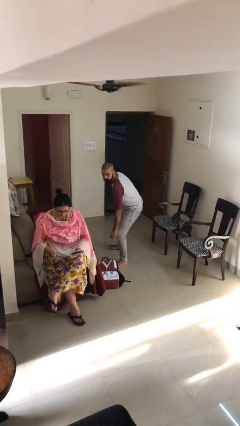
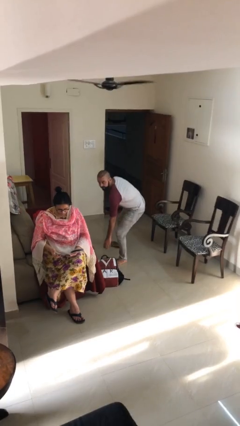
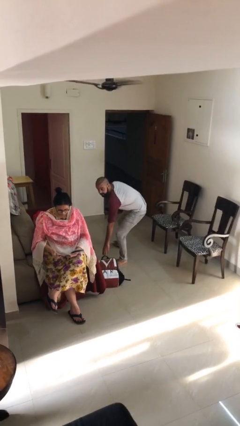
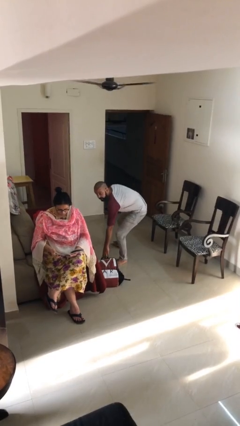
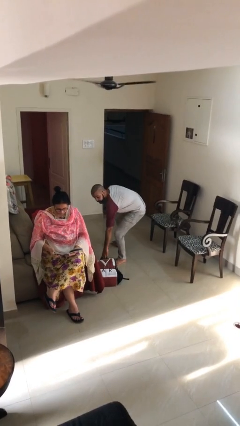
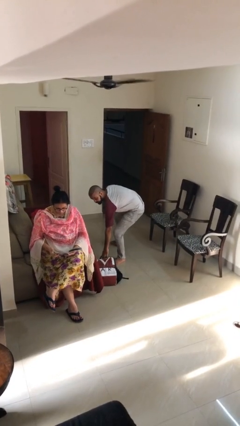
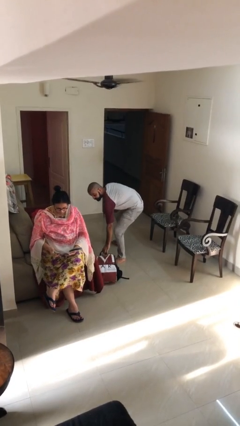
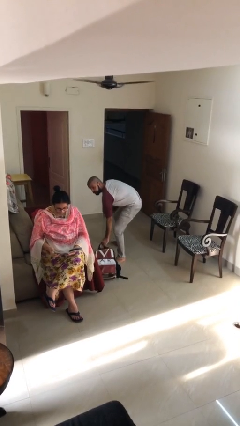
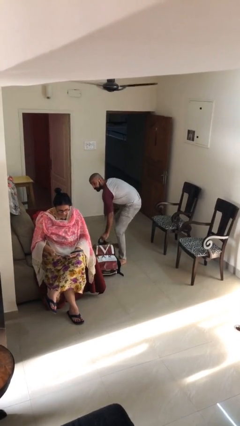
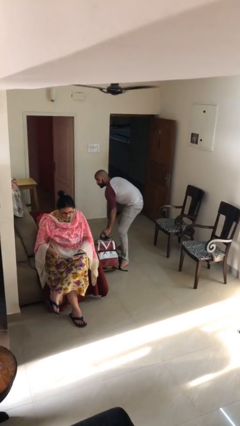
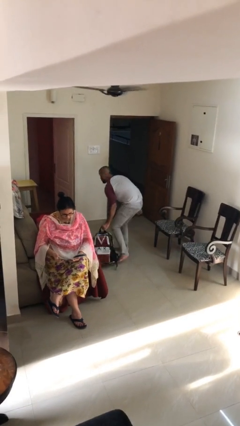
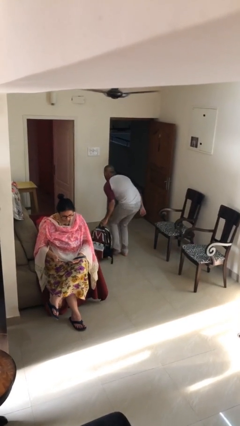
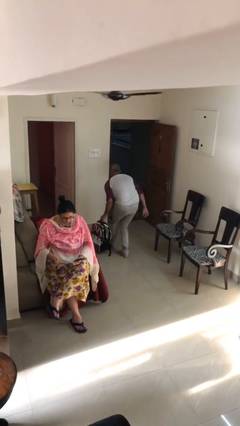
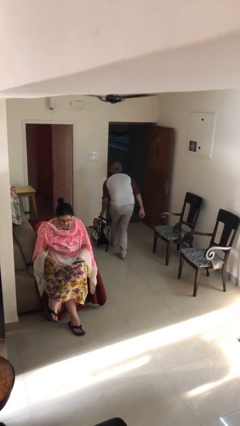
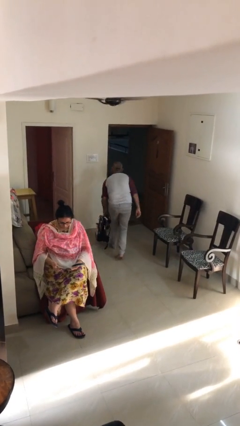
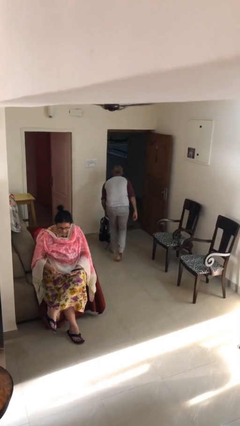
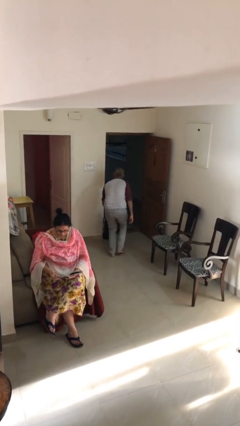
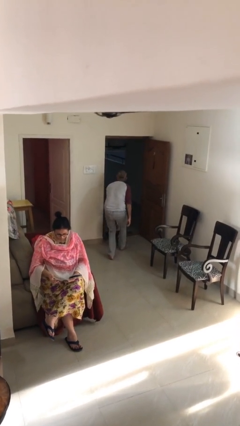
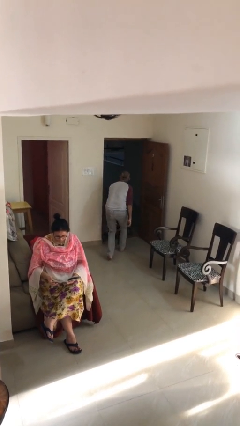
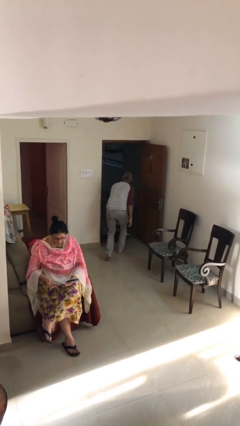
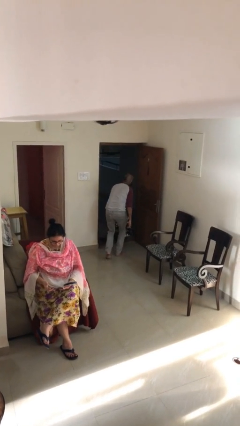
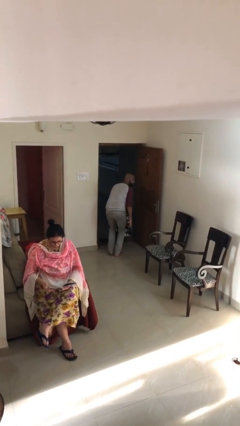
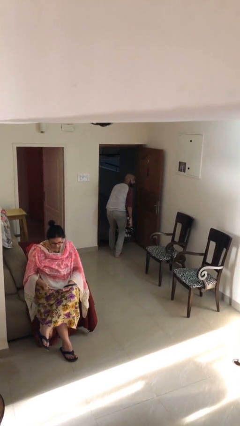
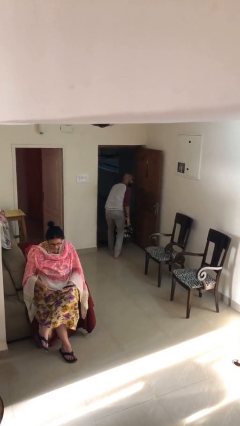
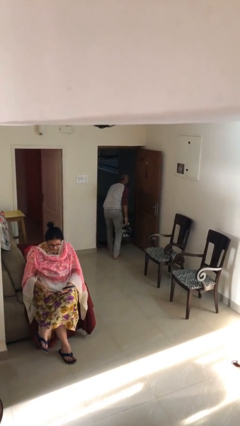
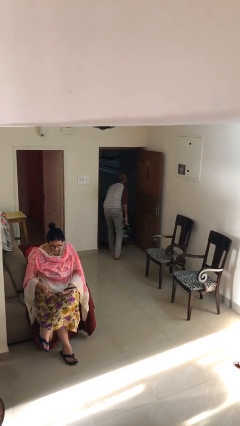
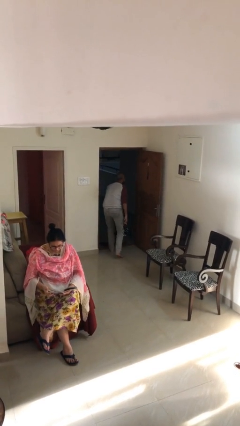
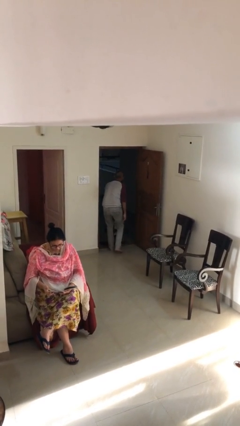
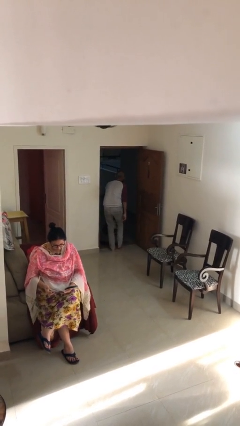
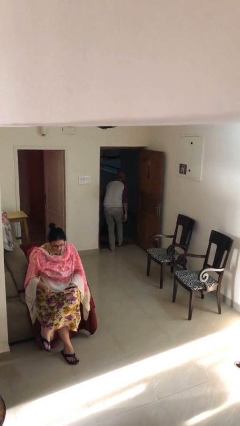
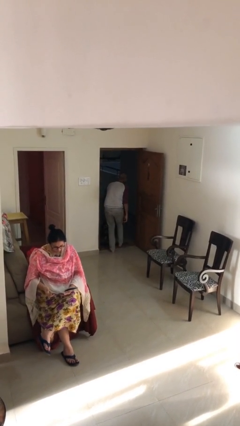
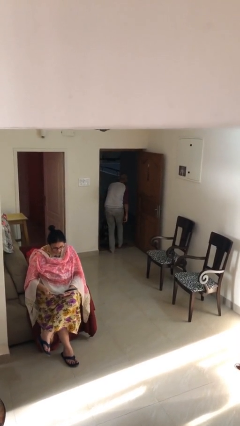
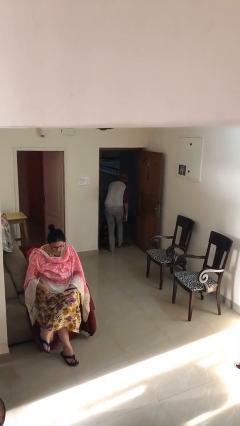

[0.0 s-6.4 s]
person steals object from person

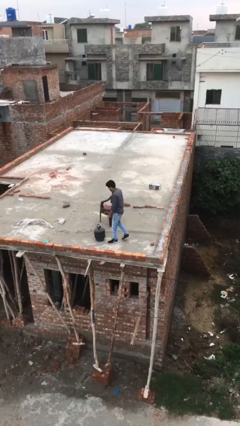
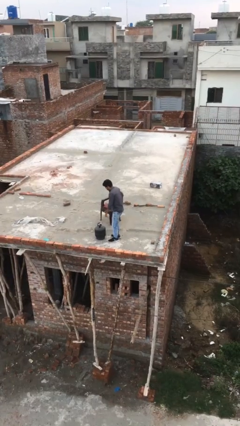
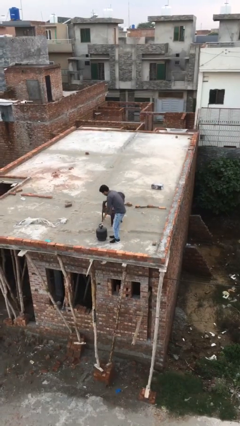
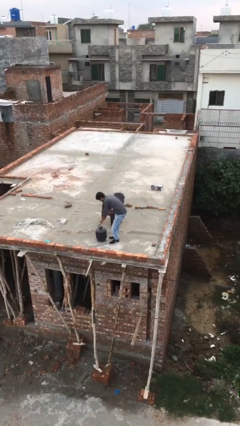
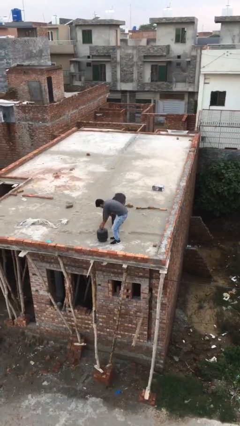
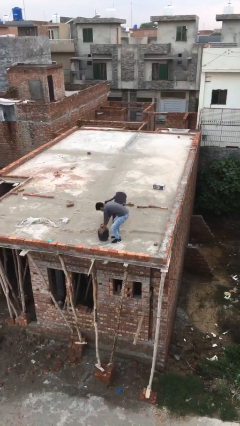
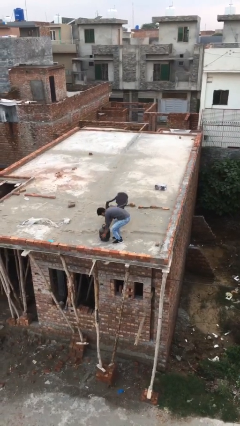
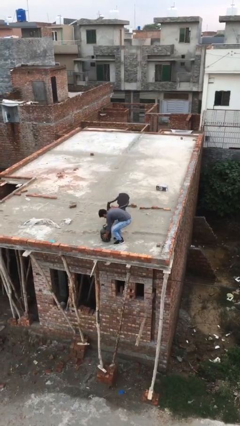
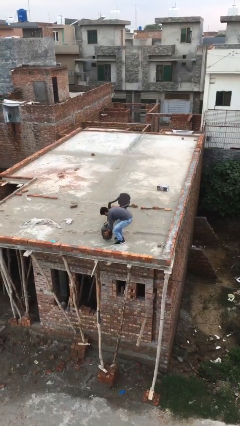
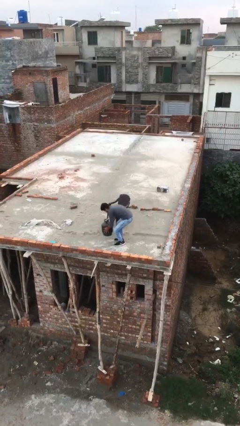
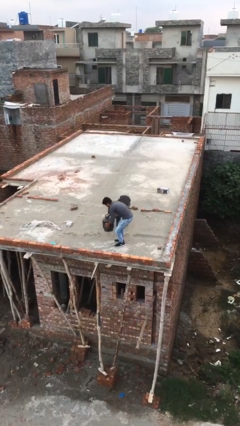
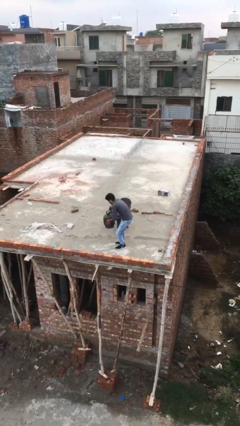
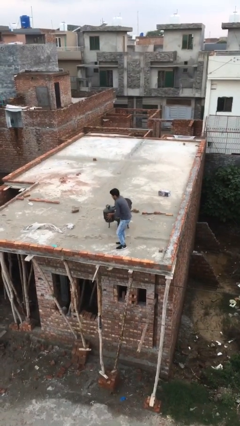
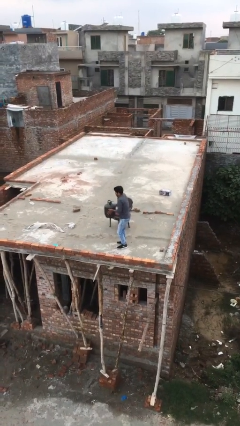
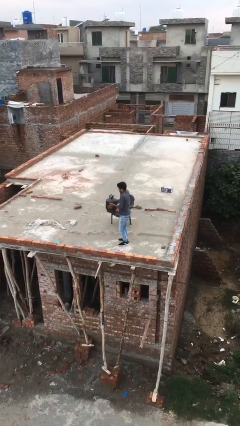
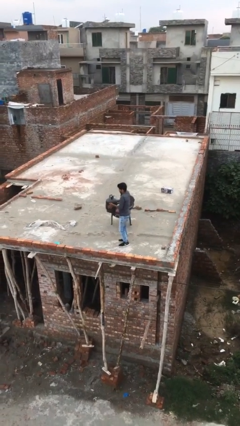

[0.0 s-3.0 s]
person picks up object from floor

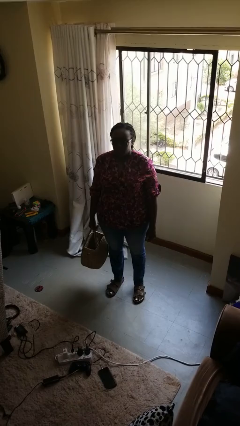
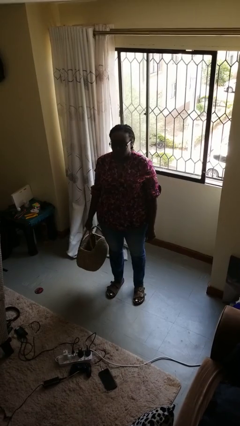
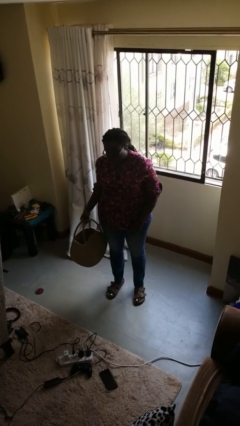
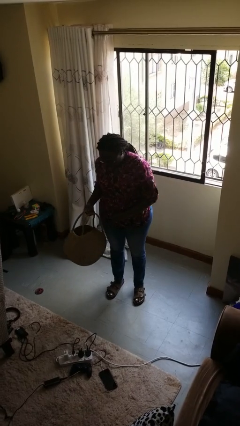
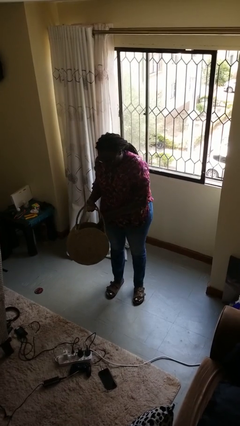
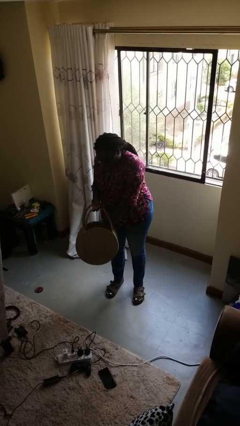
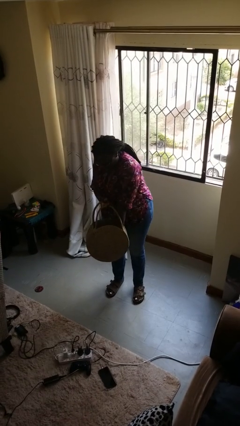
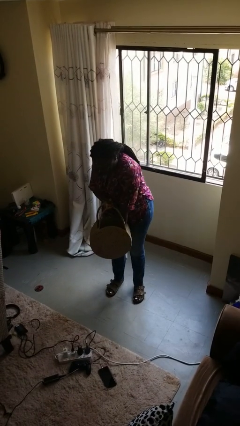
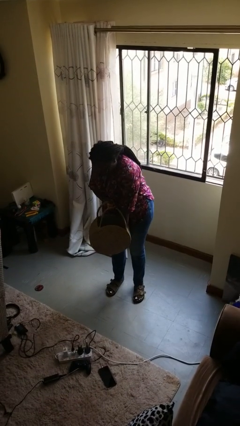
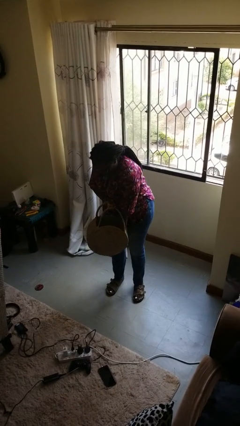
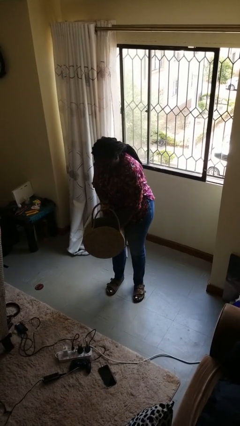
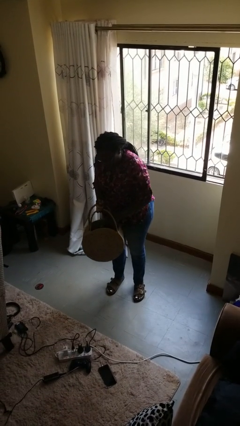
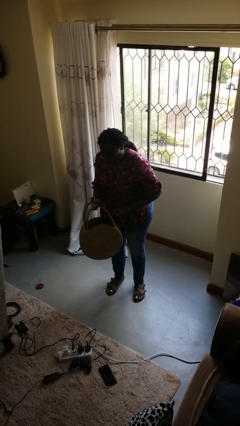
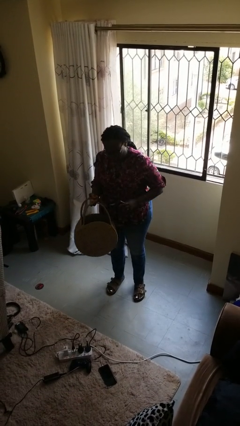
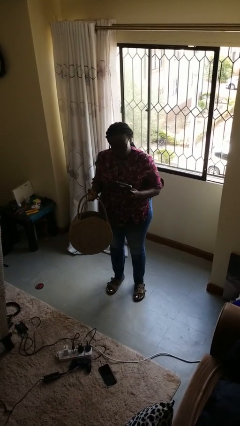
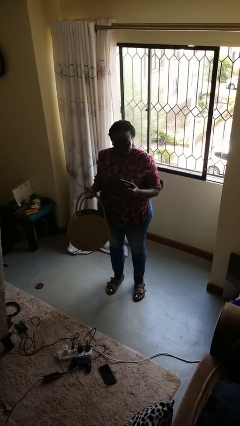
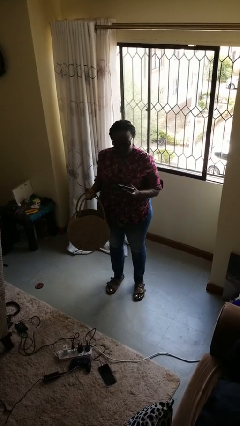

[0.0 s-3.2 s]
person takes object from basket

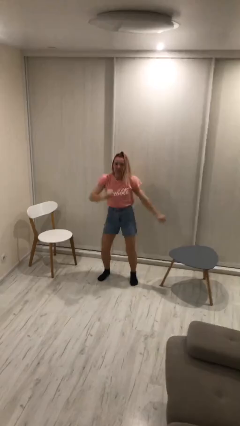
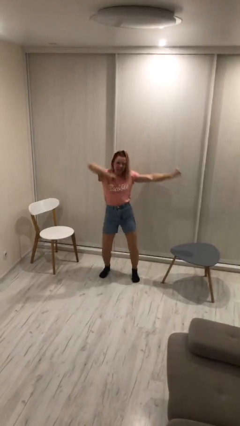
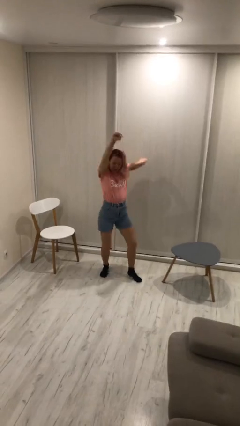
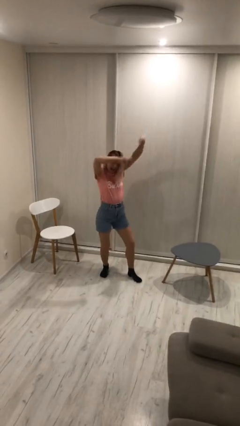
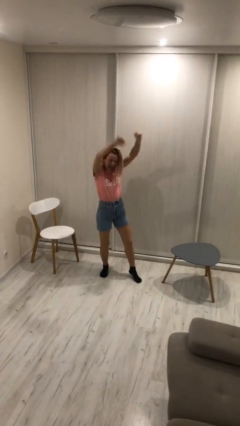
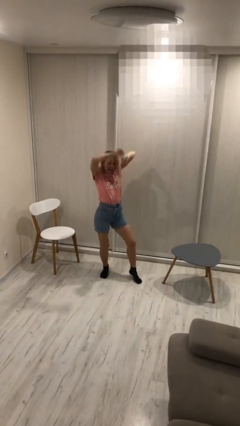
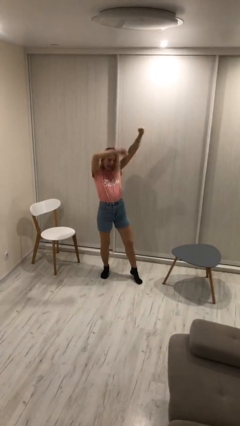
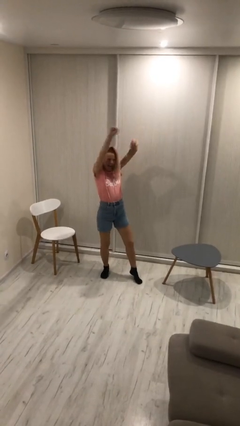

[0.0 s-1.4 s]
person dances in place

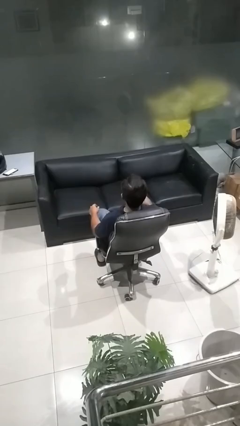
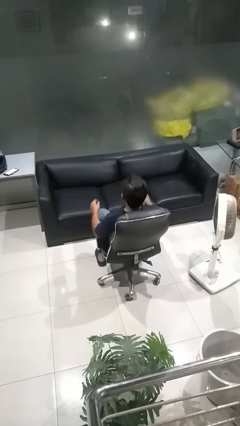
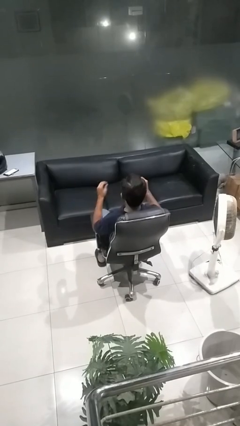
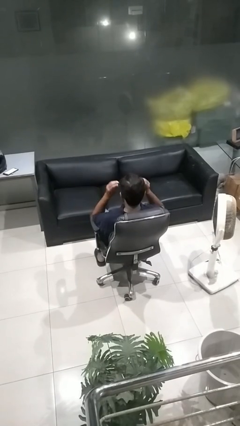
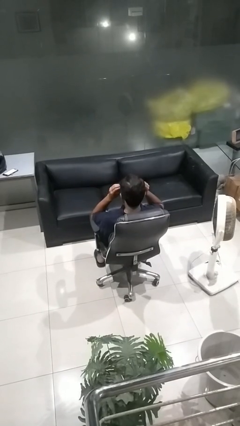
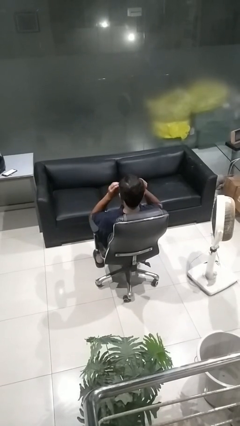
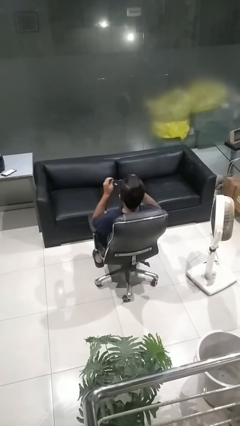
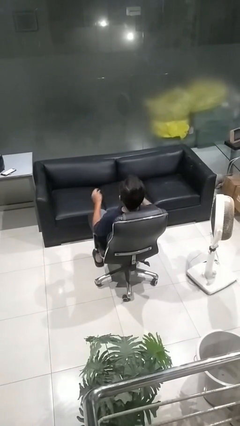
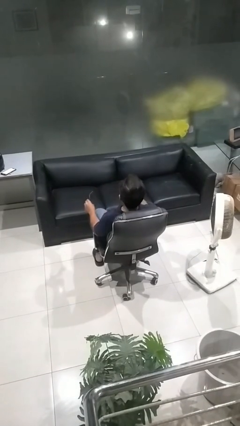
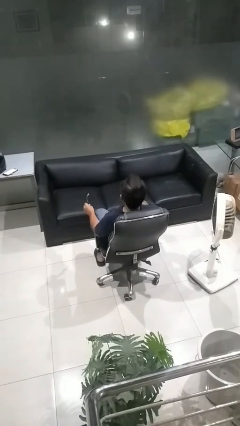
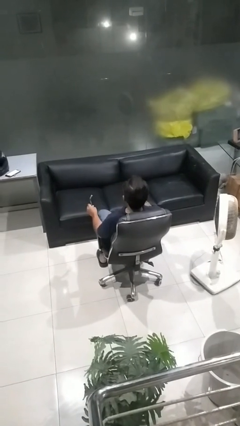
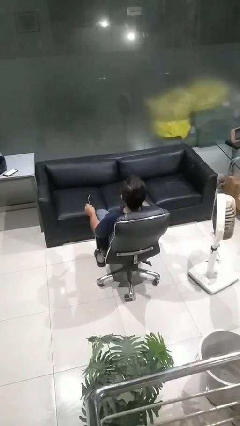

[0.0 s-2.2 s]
person takes off sunglasses

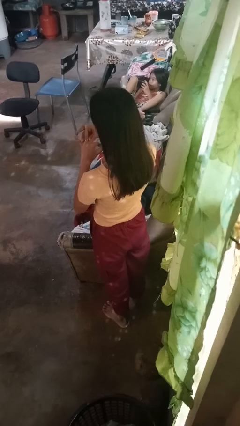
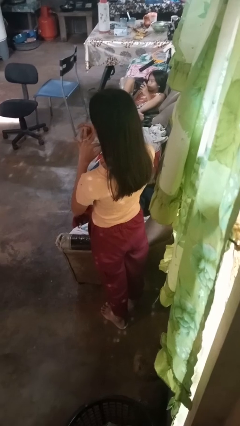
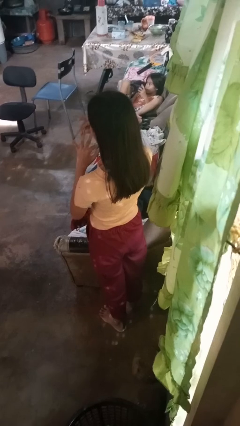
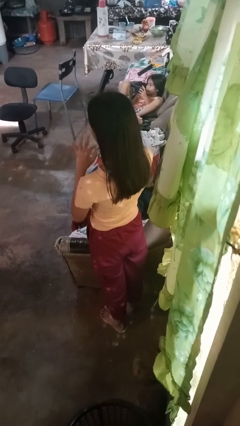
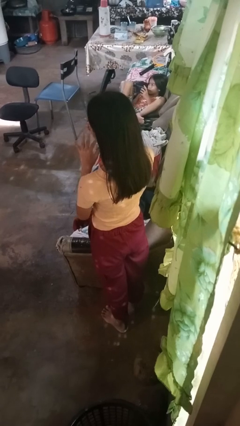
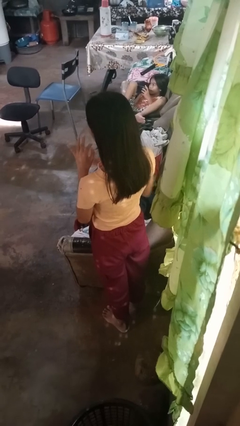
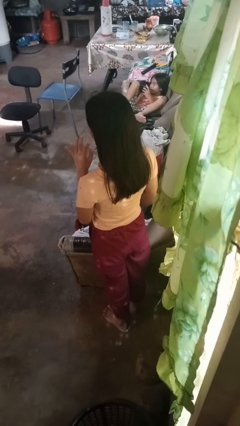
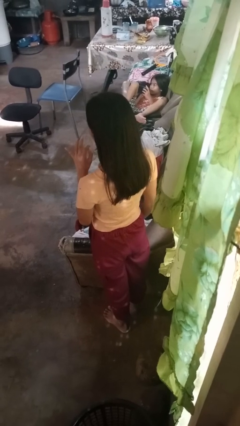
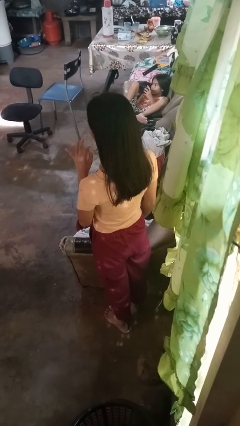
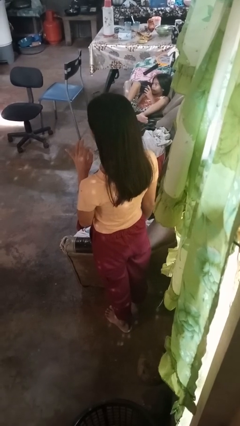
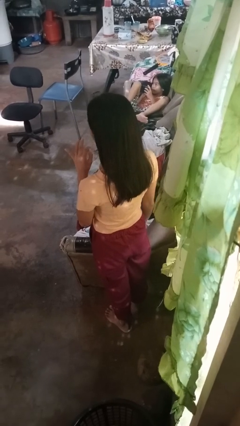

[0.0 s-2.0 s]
person takes off ring
